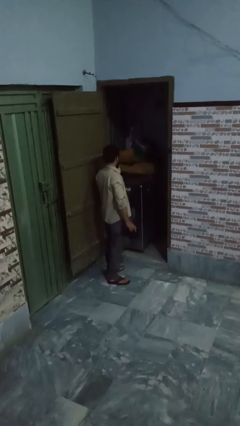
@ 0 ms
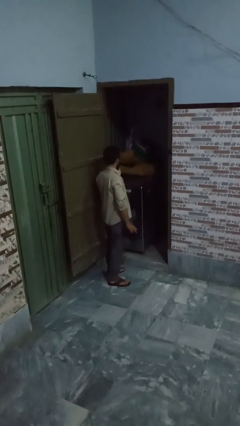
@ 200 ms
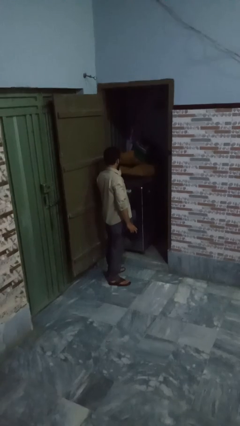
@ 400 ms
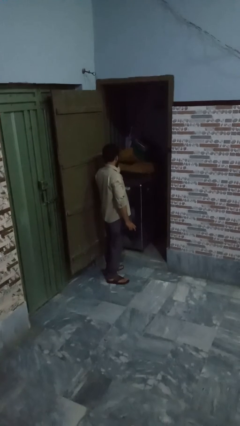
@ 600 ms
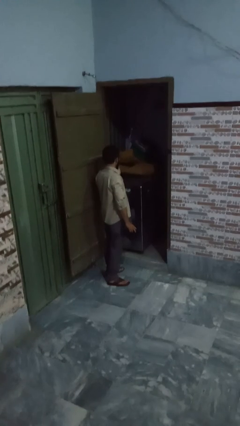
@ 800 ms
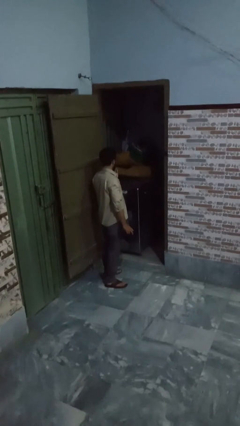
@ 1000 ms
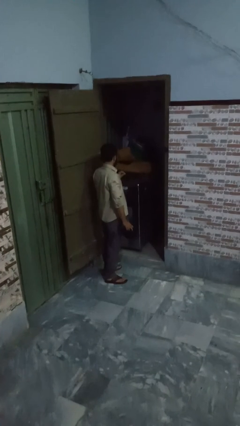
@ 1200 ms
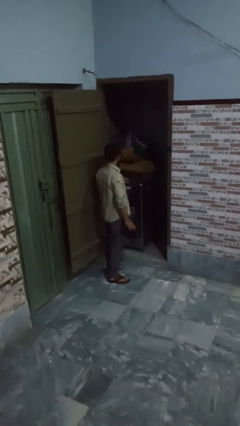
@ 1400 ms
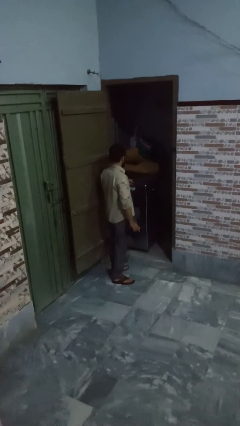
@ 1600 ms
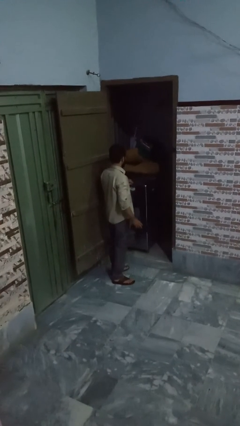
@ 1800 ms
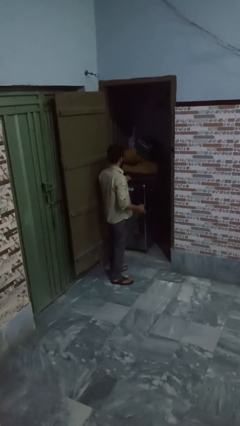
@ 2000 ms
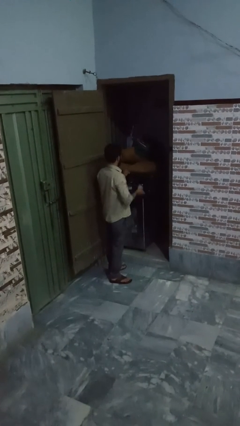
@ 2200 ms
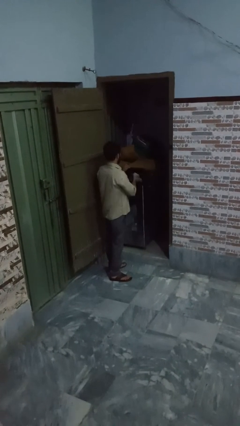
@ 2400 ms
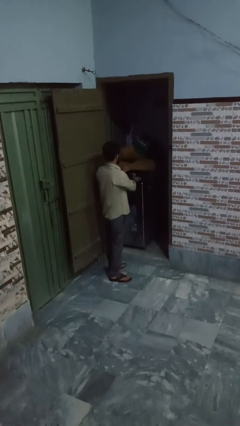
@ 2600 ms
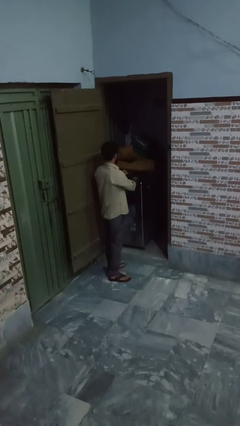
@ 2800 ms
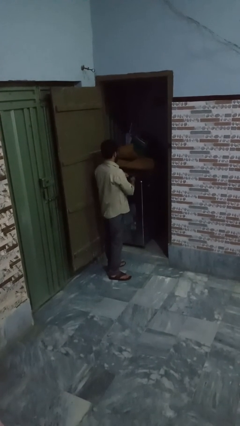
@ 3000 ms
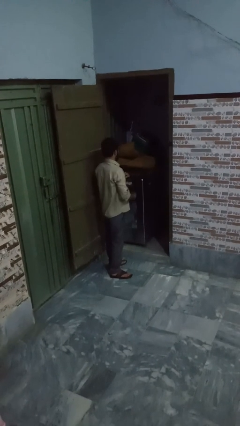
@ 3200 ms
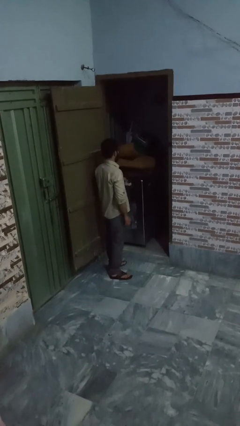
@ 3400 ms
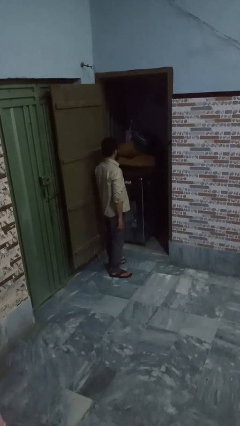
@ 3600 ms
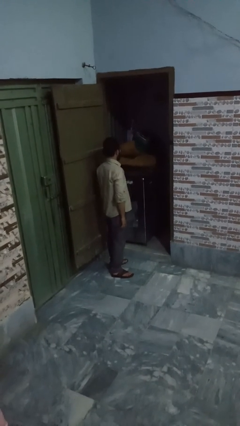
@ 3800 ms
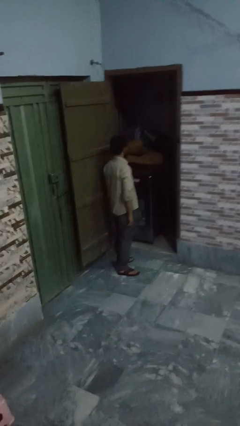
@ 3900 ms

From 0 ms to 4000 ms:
person loads dryer

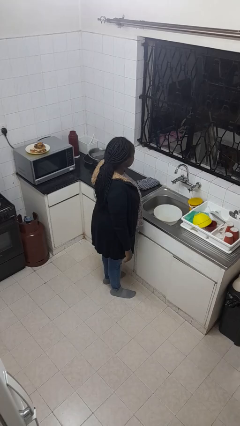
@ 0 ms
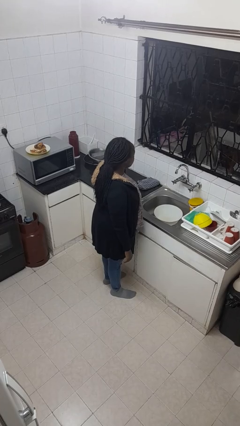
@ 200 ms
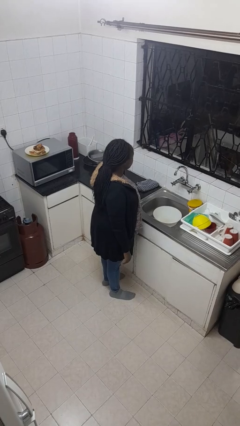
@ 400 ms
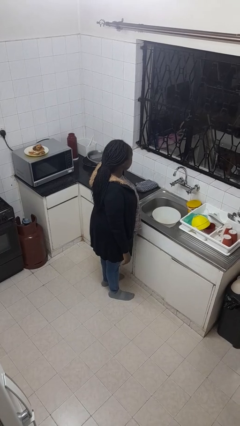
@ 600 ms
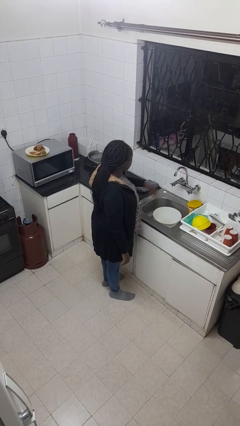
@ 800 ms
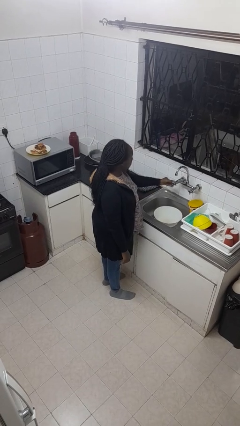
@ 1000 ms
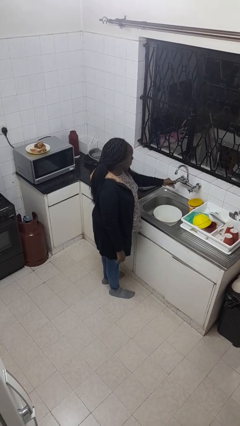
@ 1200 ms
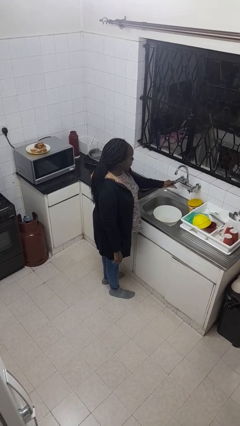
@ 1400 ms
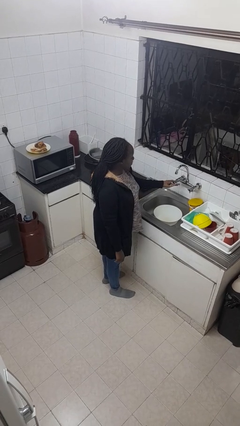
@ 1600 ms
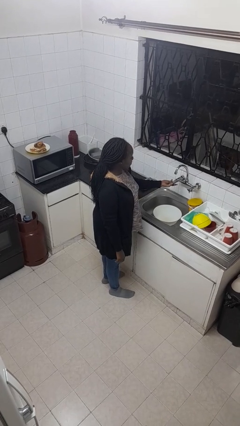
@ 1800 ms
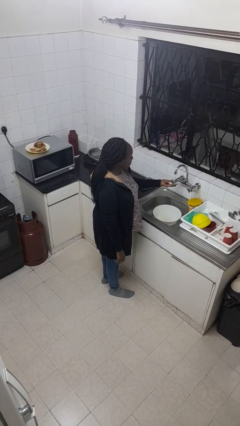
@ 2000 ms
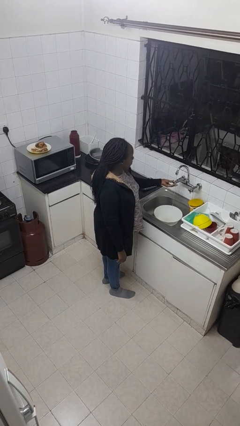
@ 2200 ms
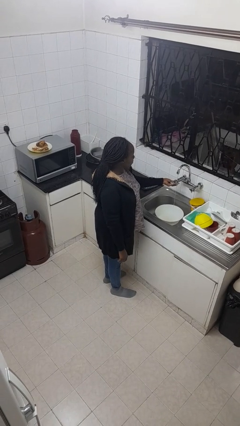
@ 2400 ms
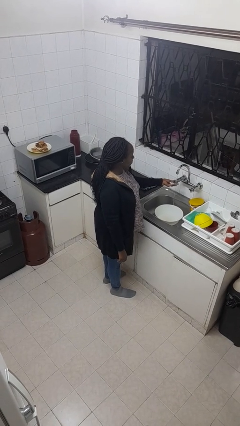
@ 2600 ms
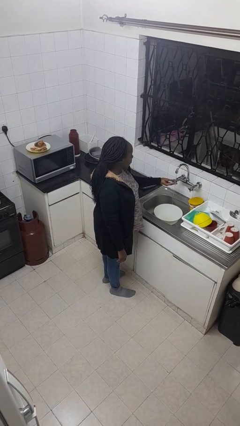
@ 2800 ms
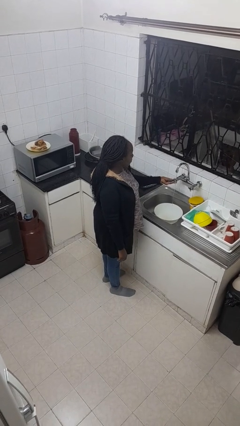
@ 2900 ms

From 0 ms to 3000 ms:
person turns on faucet

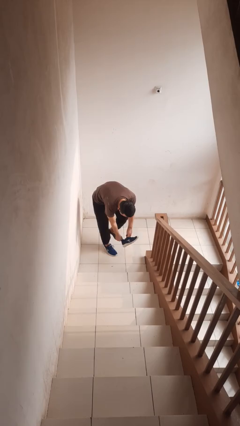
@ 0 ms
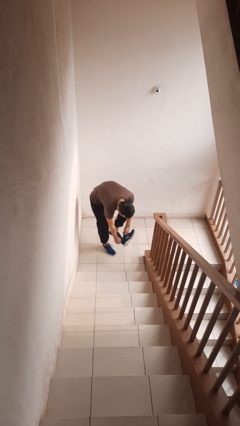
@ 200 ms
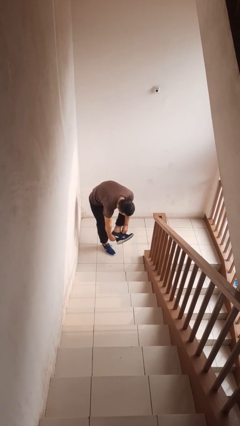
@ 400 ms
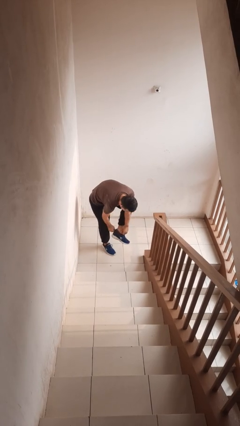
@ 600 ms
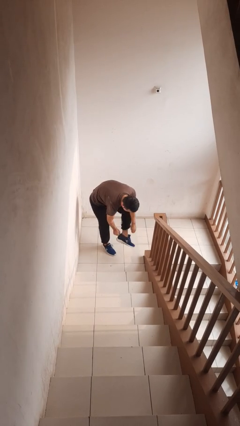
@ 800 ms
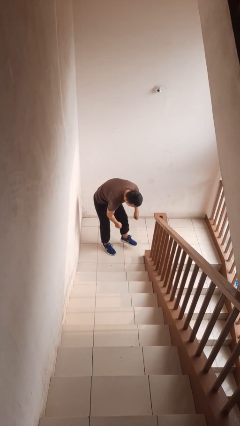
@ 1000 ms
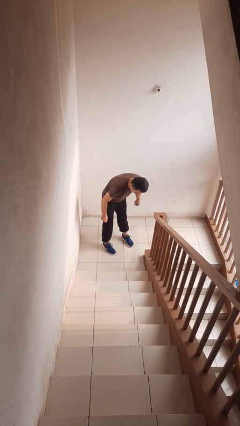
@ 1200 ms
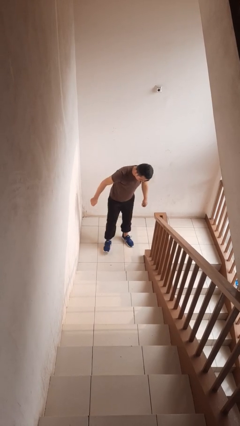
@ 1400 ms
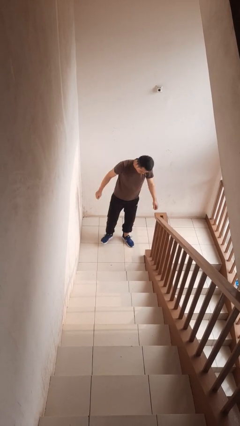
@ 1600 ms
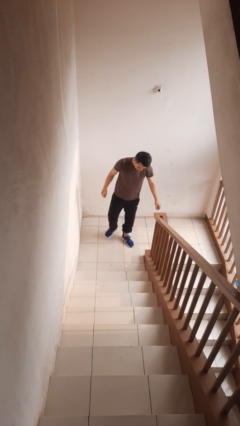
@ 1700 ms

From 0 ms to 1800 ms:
person puts on shoes

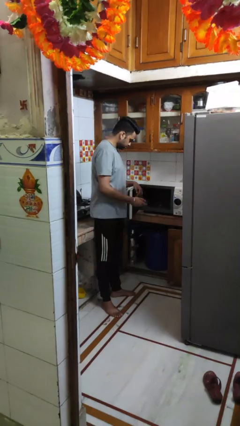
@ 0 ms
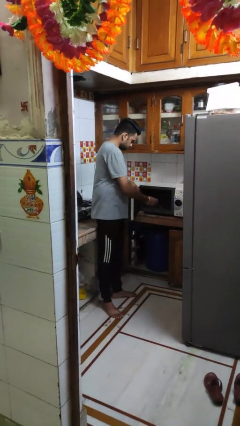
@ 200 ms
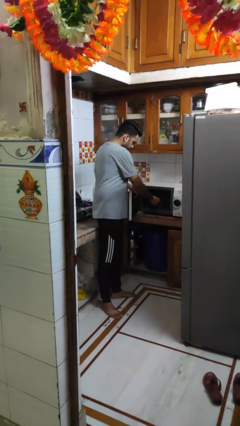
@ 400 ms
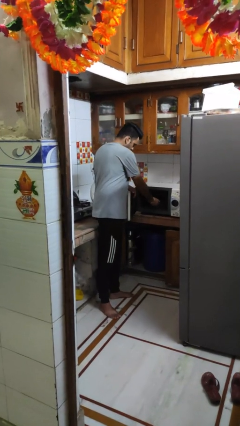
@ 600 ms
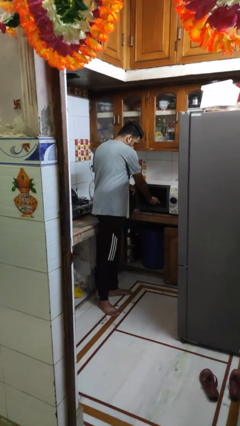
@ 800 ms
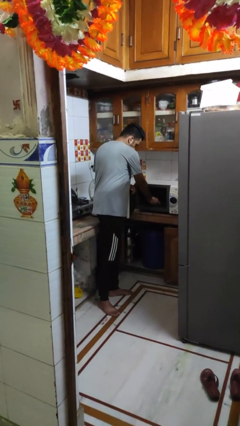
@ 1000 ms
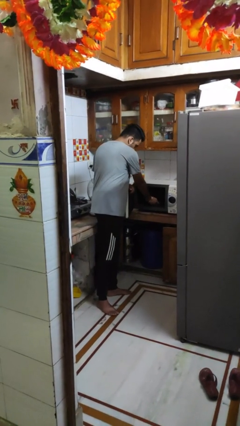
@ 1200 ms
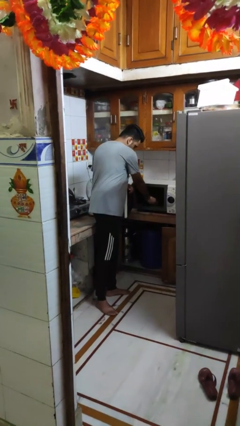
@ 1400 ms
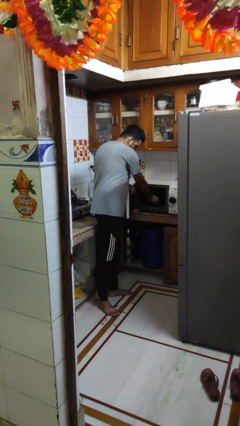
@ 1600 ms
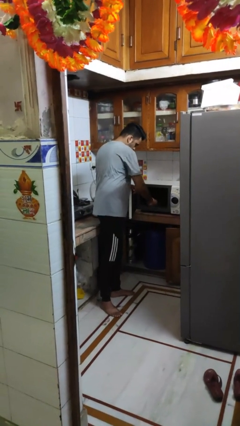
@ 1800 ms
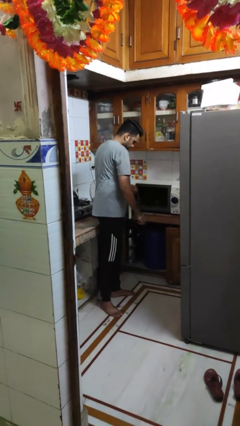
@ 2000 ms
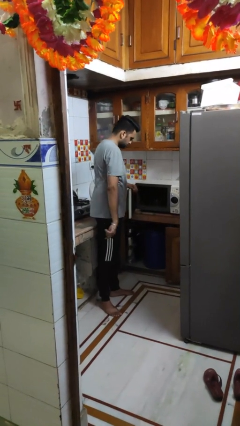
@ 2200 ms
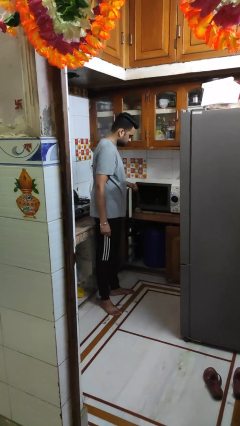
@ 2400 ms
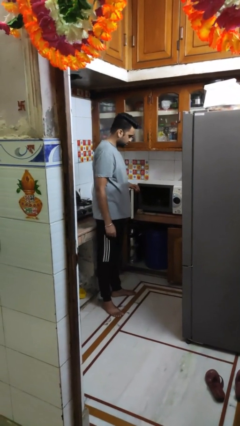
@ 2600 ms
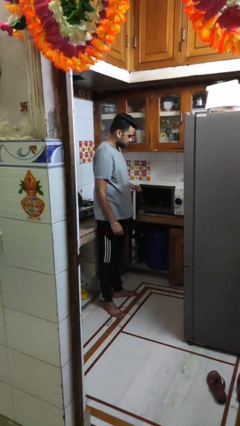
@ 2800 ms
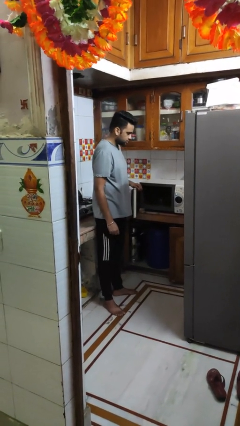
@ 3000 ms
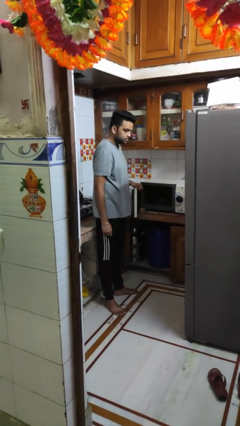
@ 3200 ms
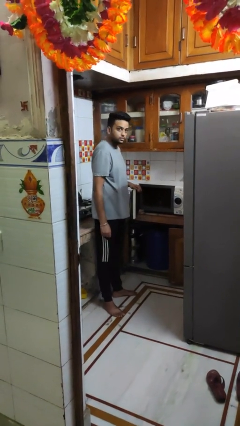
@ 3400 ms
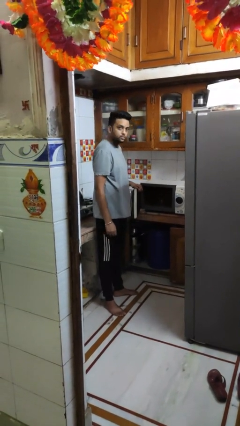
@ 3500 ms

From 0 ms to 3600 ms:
person puts object into microwave

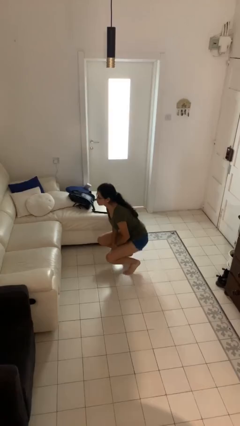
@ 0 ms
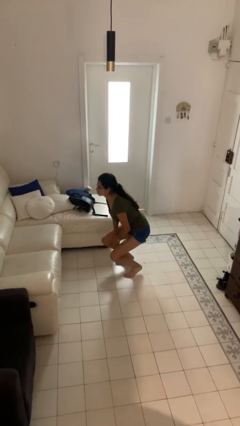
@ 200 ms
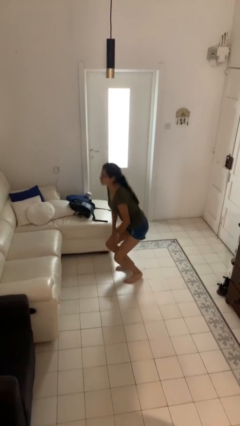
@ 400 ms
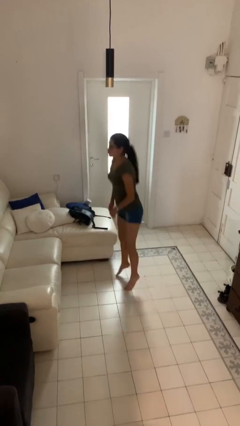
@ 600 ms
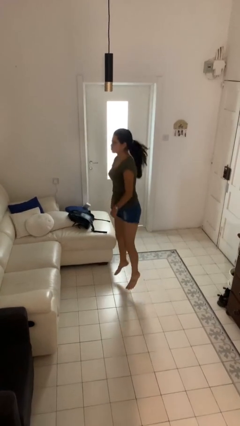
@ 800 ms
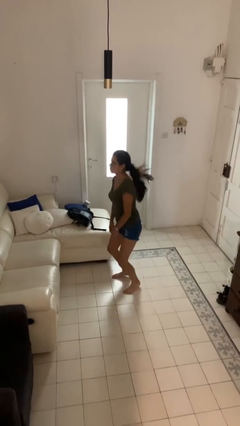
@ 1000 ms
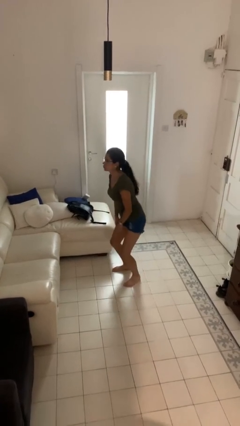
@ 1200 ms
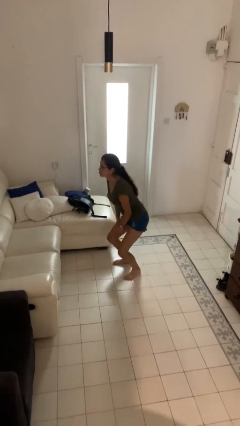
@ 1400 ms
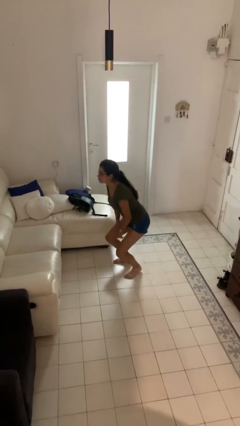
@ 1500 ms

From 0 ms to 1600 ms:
person jumps

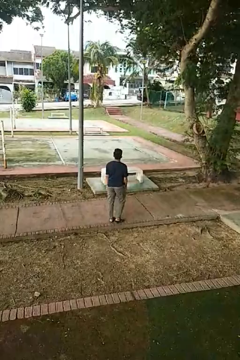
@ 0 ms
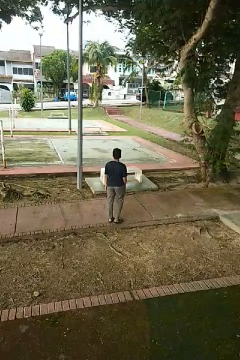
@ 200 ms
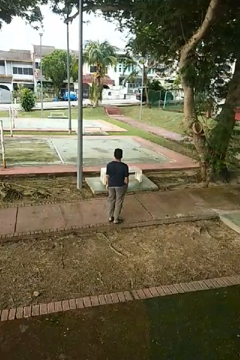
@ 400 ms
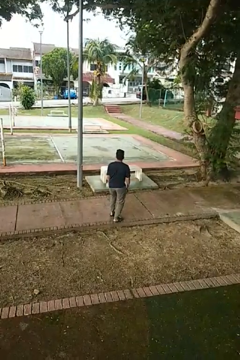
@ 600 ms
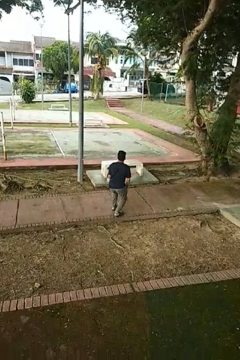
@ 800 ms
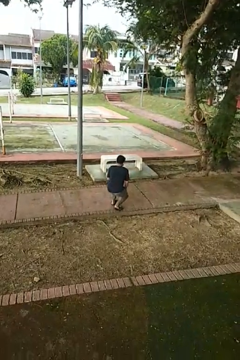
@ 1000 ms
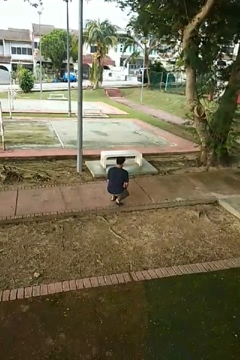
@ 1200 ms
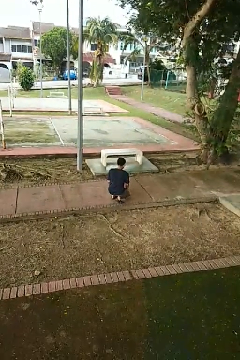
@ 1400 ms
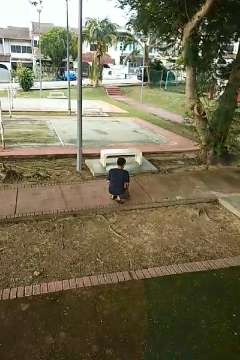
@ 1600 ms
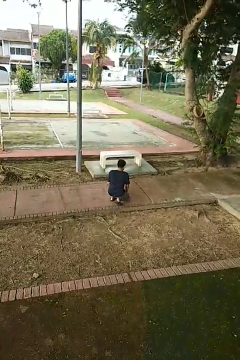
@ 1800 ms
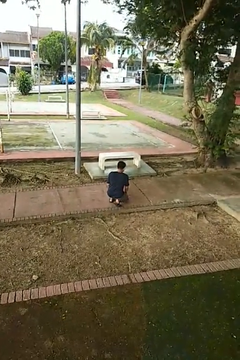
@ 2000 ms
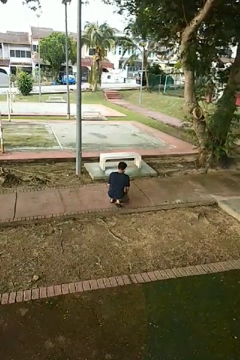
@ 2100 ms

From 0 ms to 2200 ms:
person kneels

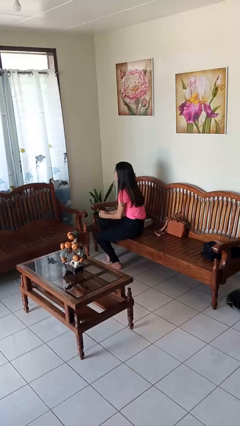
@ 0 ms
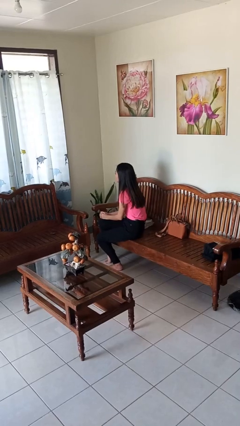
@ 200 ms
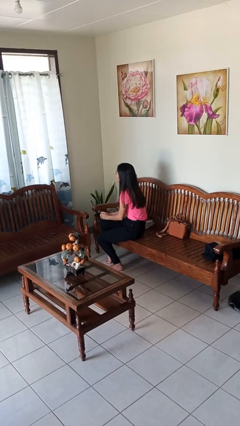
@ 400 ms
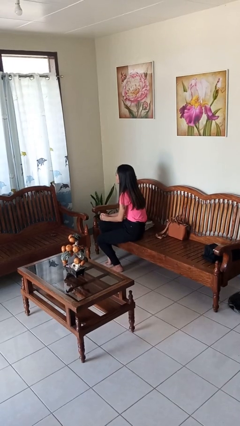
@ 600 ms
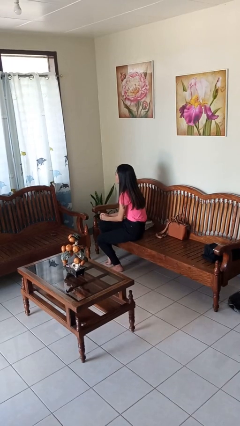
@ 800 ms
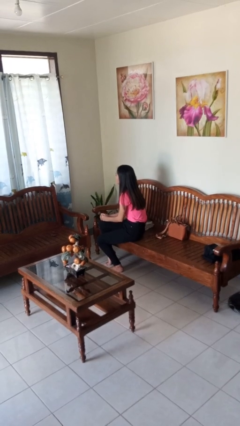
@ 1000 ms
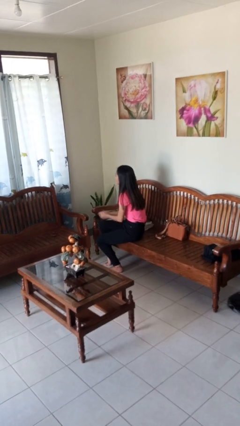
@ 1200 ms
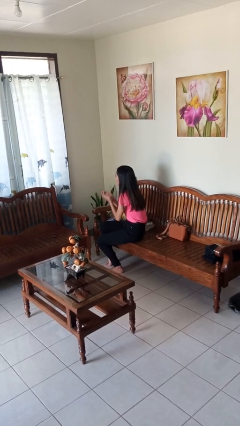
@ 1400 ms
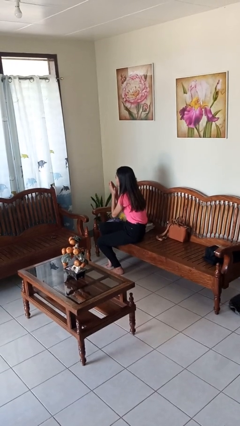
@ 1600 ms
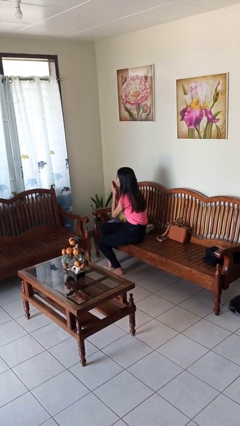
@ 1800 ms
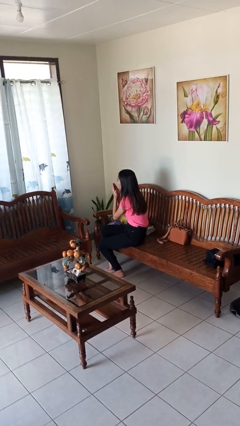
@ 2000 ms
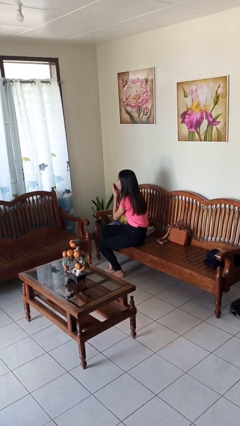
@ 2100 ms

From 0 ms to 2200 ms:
person blows into hands
